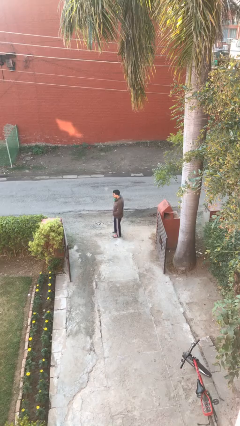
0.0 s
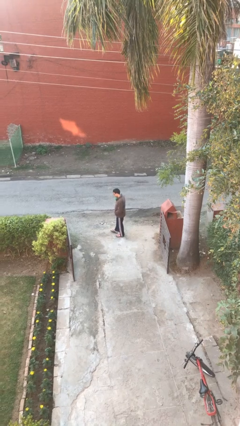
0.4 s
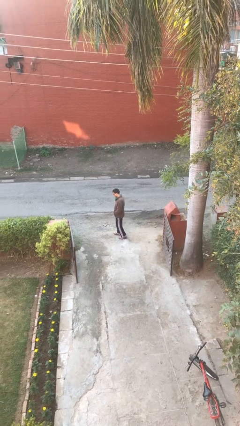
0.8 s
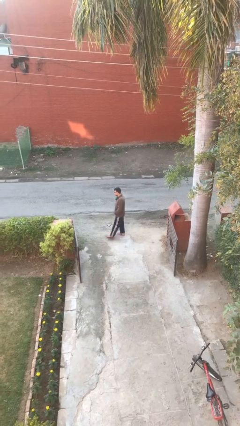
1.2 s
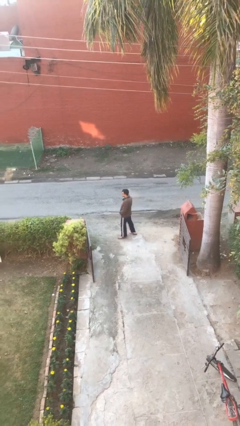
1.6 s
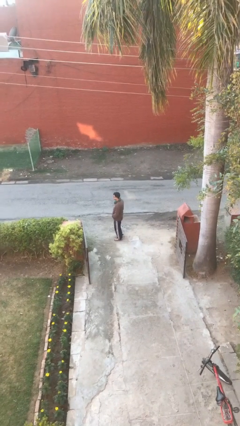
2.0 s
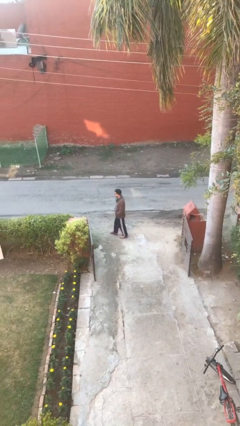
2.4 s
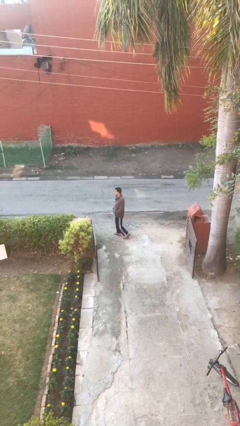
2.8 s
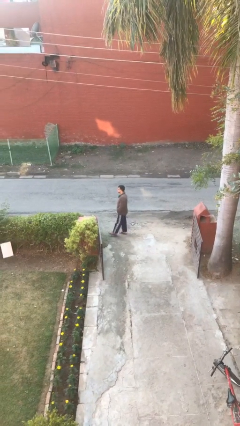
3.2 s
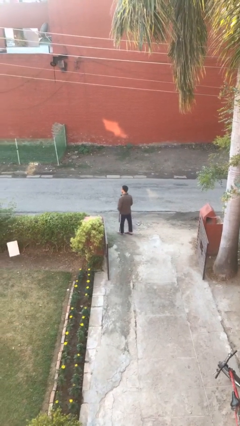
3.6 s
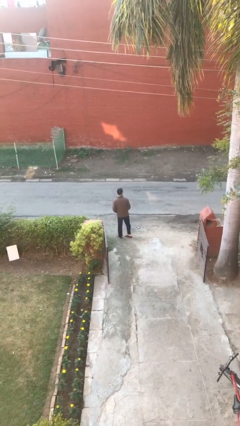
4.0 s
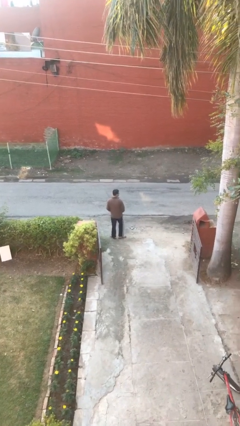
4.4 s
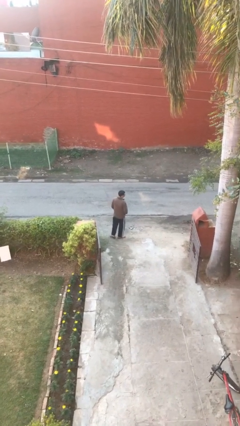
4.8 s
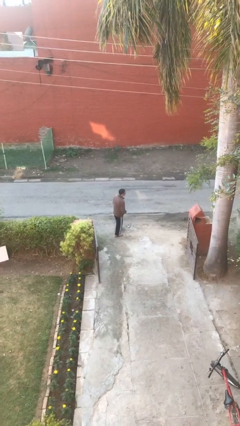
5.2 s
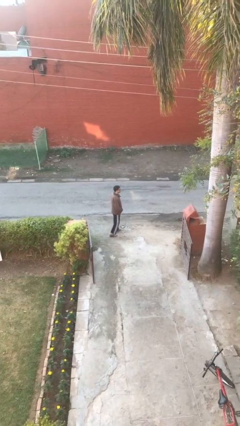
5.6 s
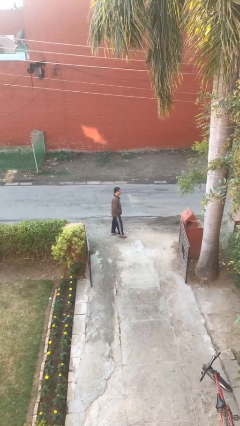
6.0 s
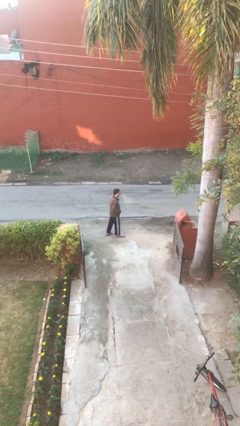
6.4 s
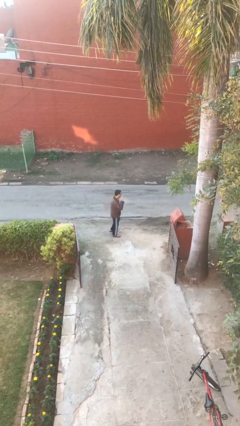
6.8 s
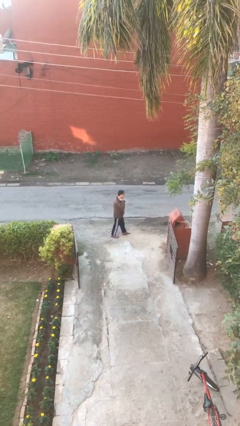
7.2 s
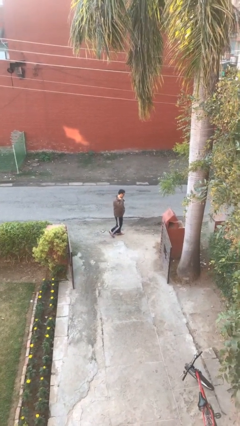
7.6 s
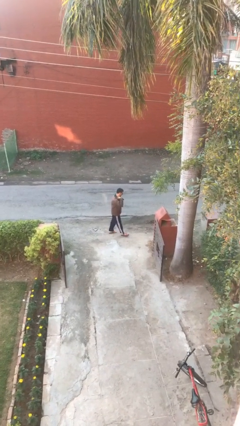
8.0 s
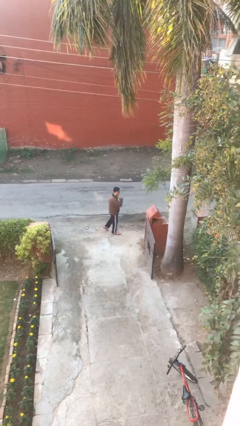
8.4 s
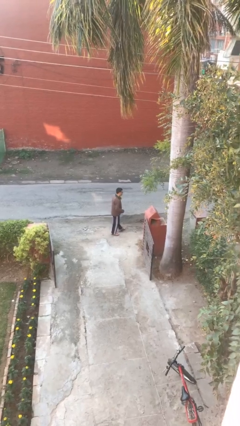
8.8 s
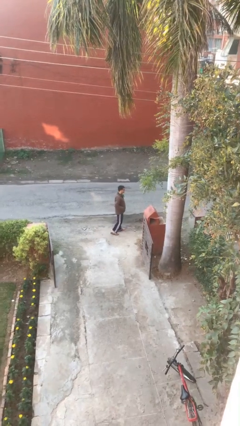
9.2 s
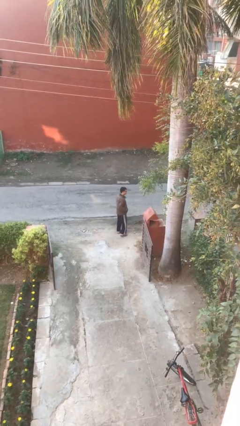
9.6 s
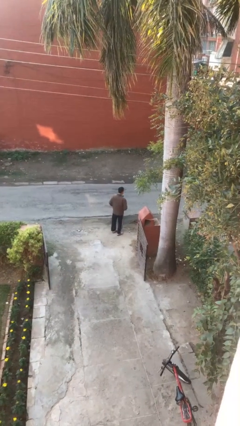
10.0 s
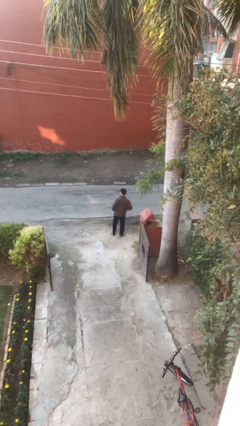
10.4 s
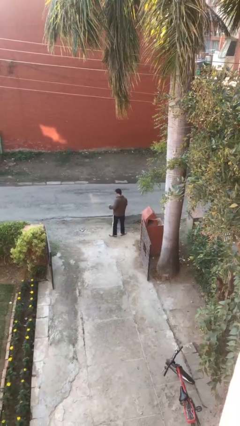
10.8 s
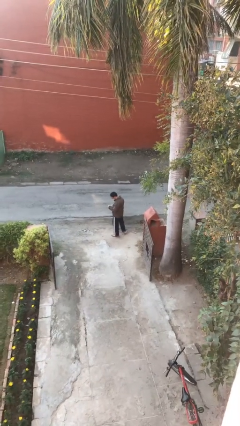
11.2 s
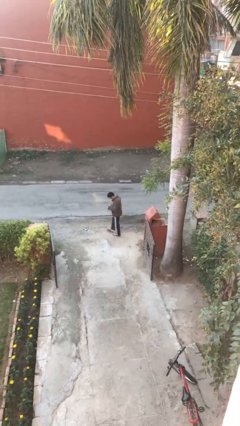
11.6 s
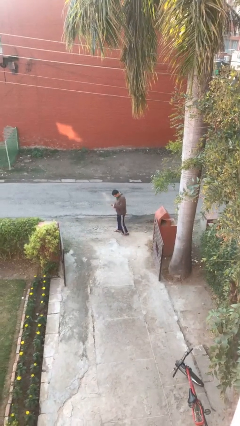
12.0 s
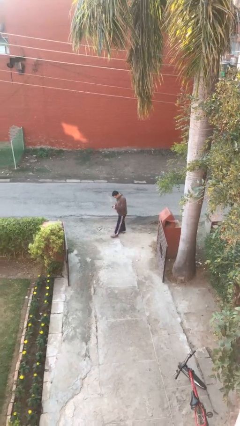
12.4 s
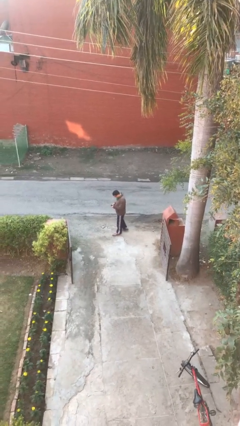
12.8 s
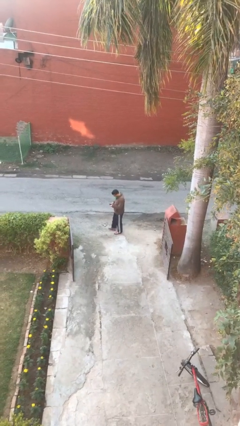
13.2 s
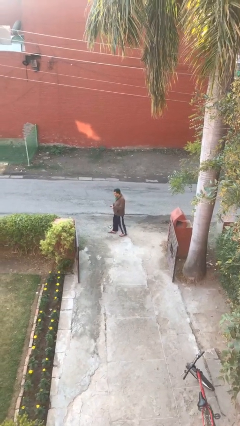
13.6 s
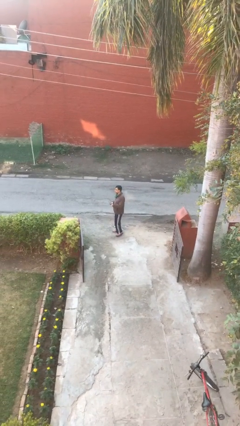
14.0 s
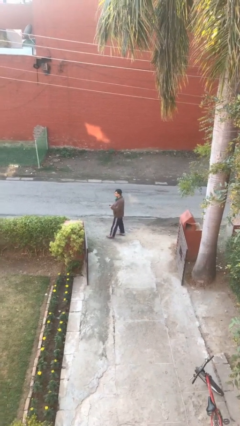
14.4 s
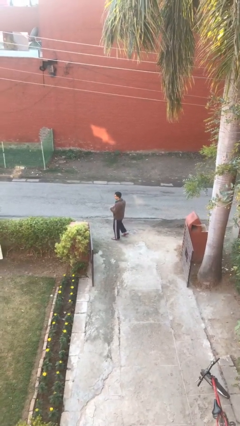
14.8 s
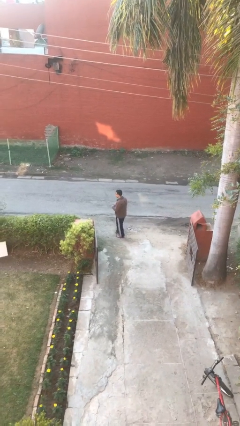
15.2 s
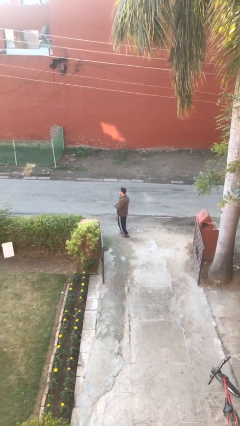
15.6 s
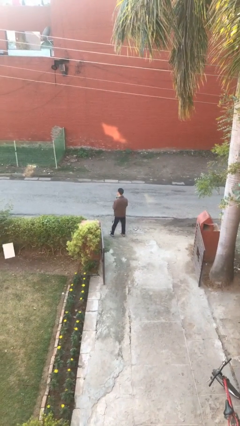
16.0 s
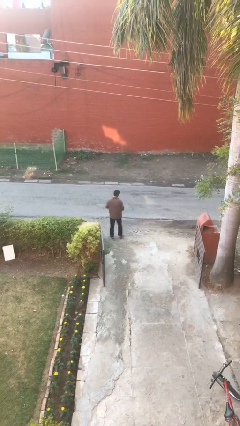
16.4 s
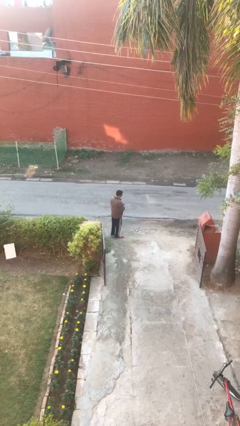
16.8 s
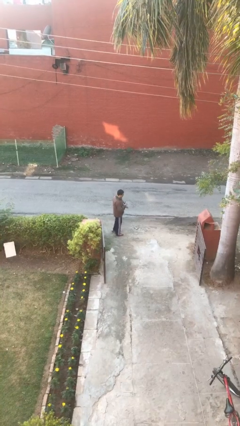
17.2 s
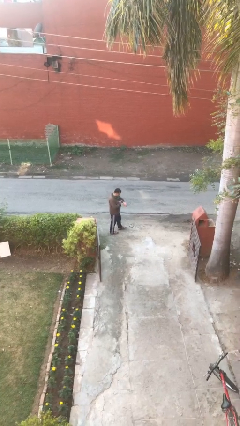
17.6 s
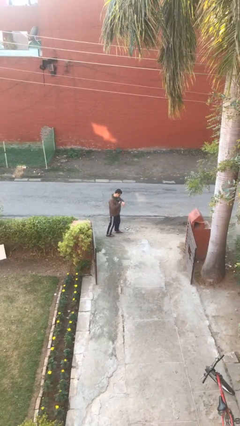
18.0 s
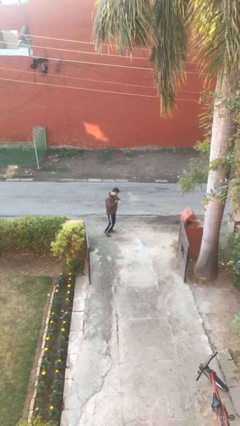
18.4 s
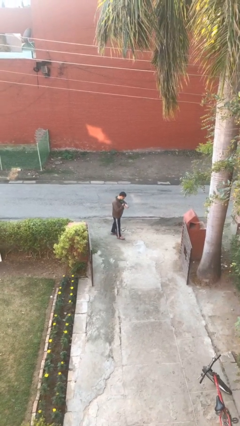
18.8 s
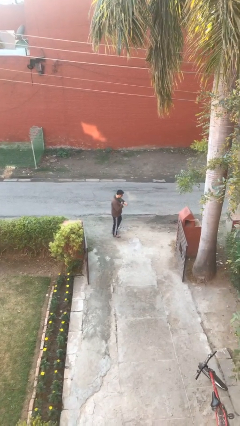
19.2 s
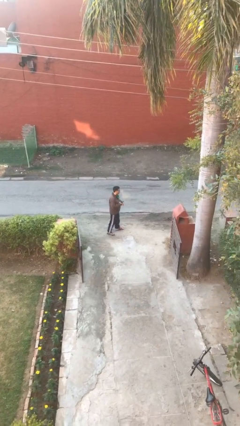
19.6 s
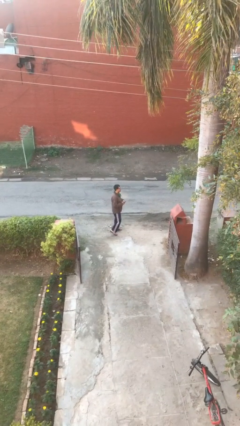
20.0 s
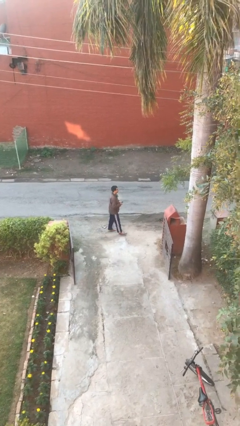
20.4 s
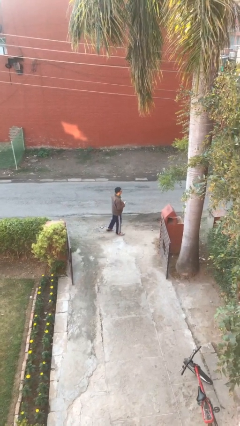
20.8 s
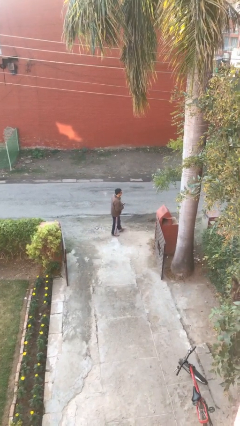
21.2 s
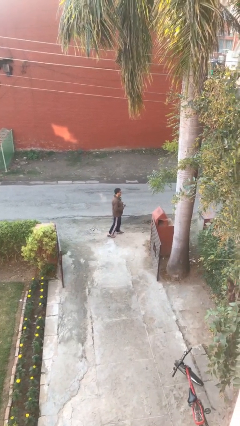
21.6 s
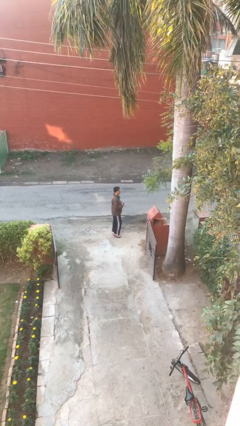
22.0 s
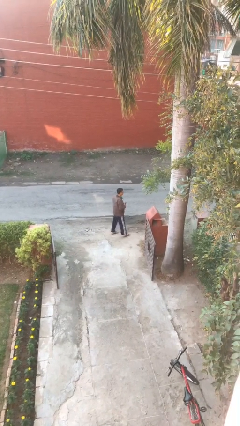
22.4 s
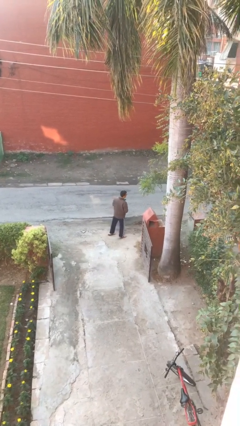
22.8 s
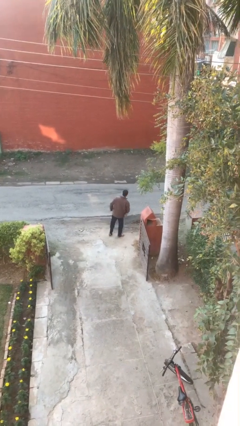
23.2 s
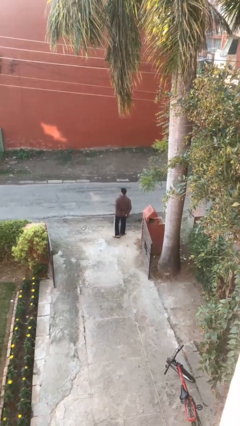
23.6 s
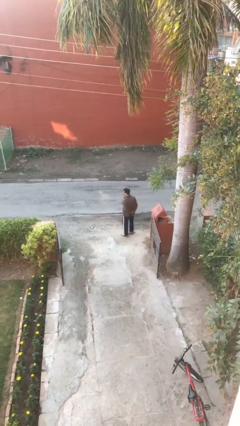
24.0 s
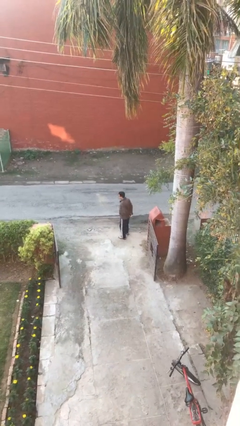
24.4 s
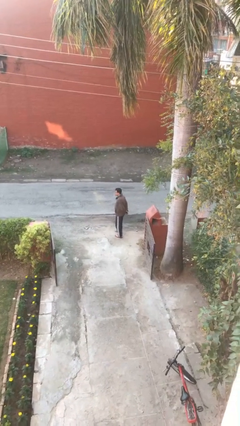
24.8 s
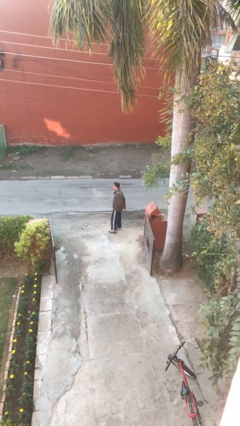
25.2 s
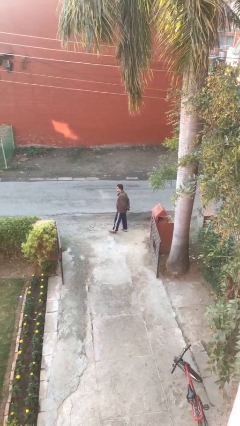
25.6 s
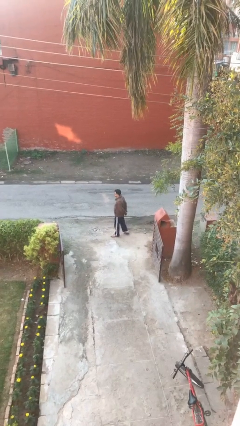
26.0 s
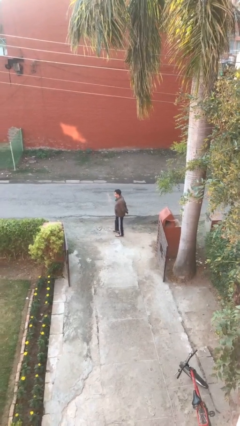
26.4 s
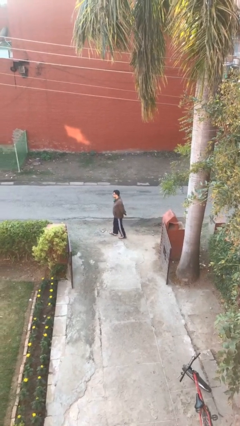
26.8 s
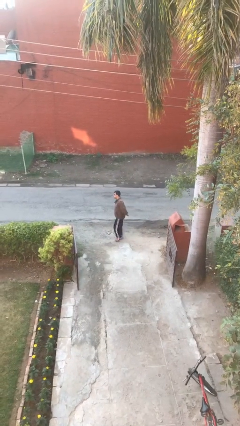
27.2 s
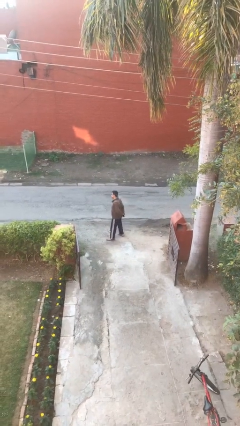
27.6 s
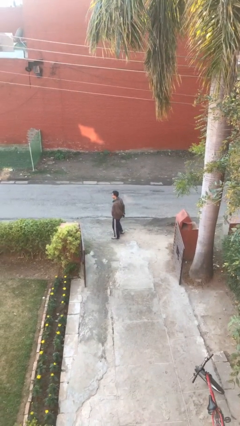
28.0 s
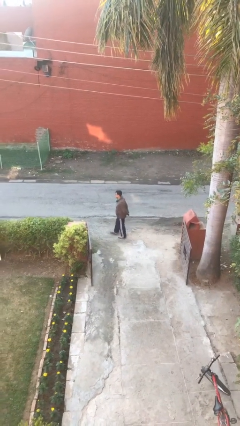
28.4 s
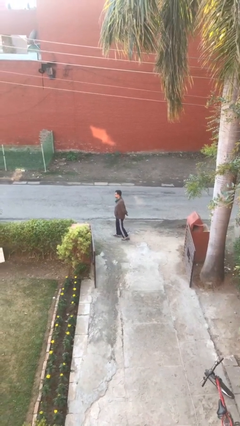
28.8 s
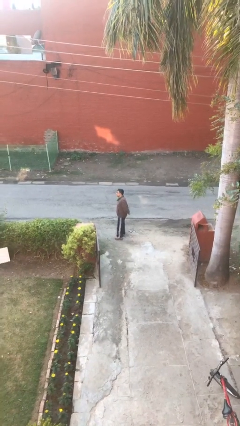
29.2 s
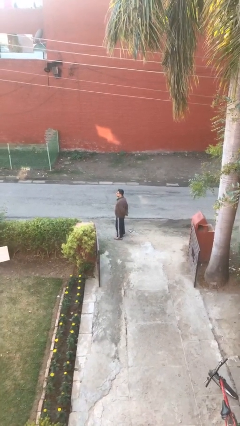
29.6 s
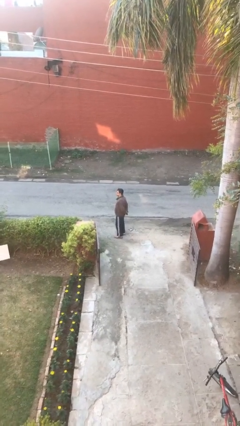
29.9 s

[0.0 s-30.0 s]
person walks

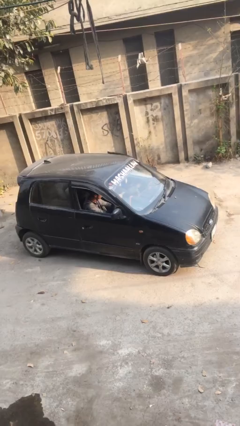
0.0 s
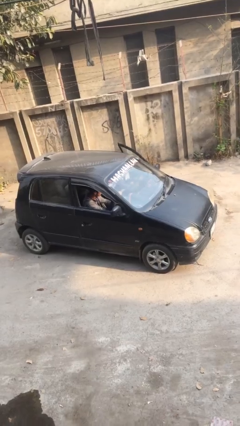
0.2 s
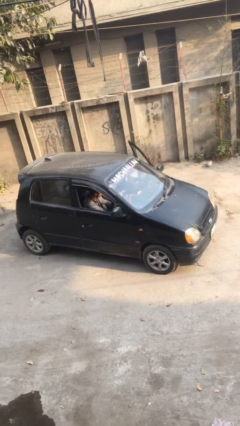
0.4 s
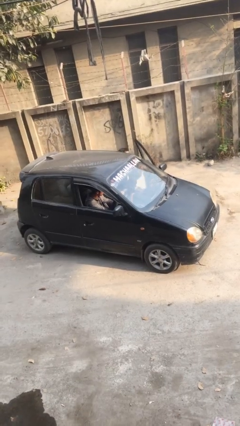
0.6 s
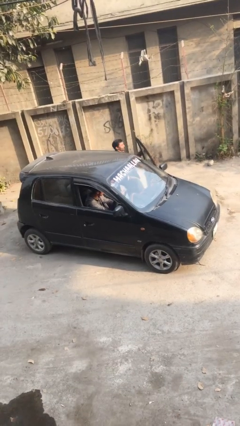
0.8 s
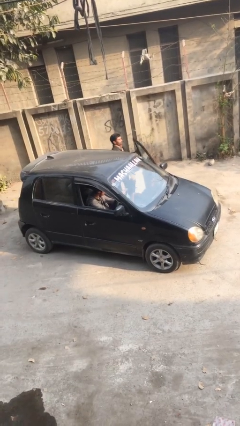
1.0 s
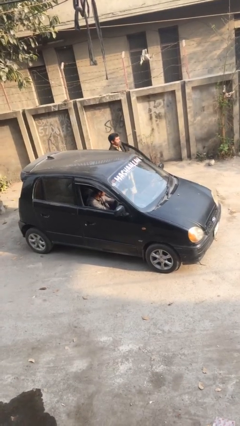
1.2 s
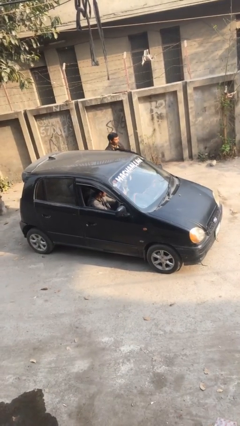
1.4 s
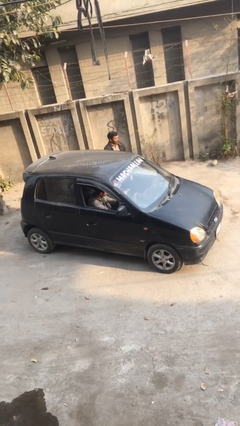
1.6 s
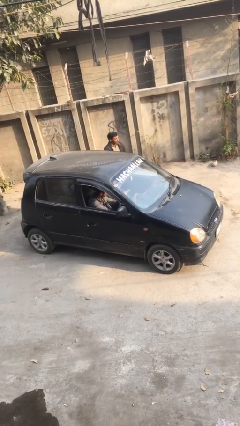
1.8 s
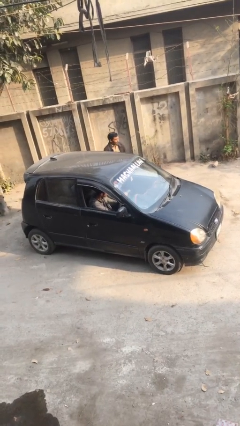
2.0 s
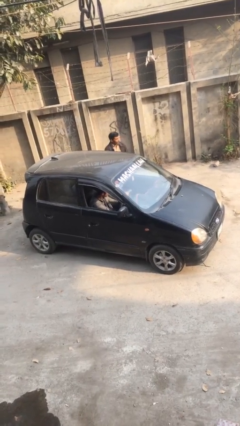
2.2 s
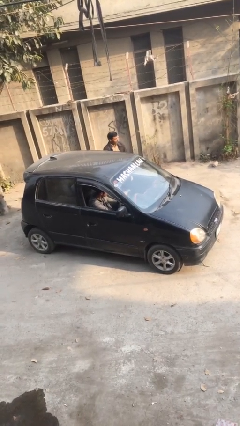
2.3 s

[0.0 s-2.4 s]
car drops off person

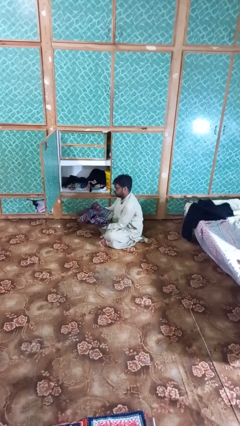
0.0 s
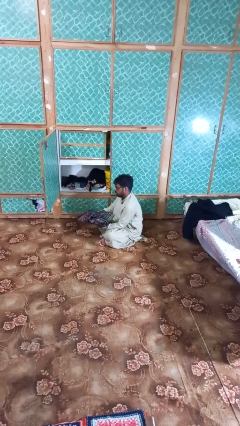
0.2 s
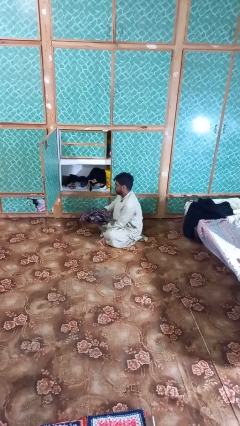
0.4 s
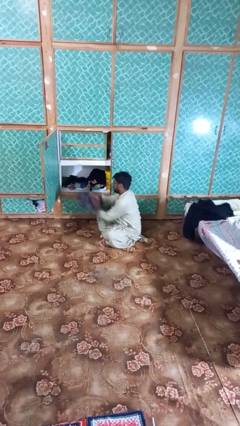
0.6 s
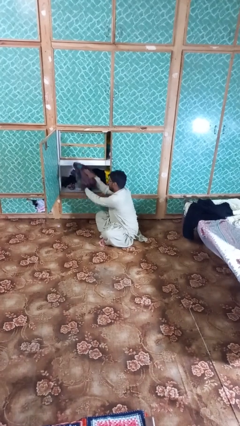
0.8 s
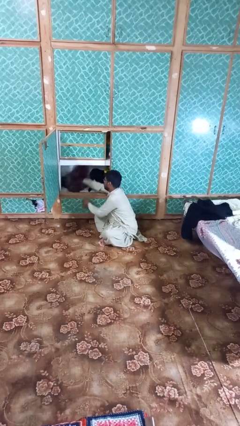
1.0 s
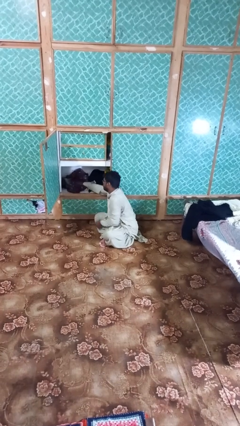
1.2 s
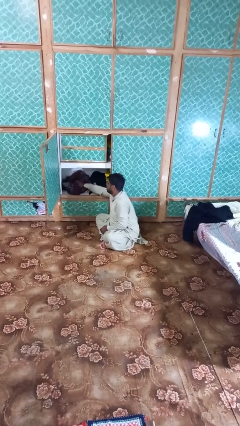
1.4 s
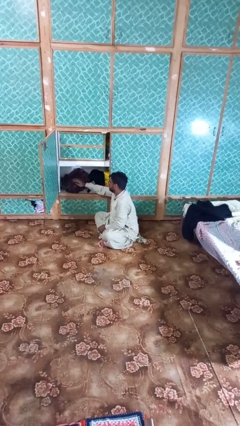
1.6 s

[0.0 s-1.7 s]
person puts clothes into dresser
